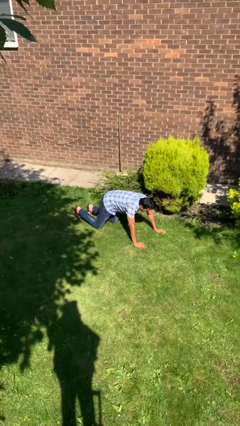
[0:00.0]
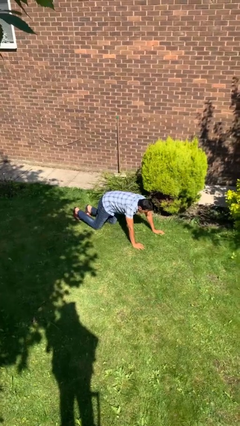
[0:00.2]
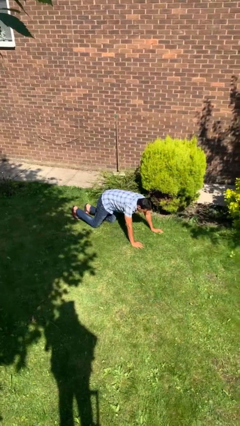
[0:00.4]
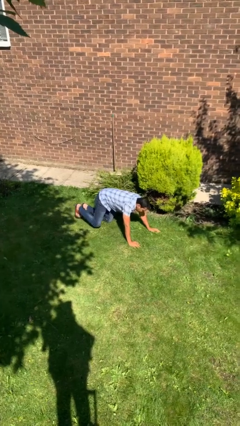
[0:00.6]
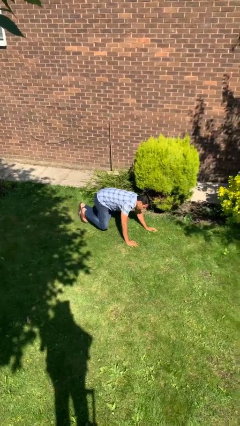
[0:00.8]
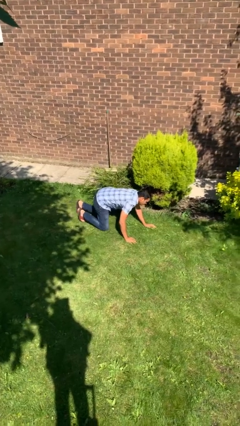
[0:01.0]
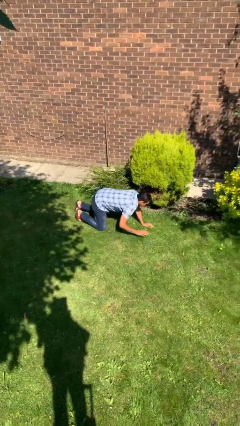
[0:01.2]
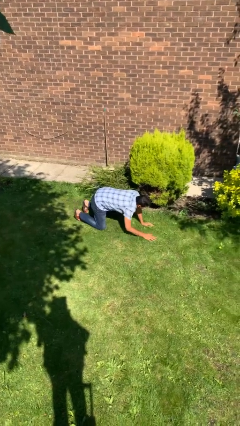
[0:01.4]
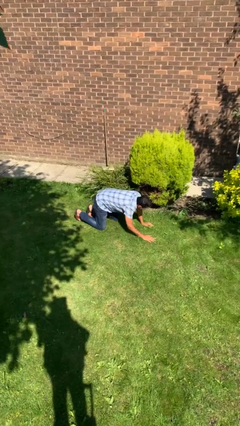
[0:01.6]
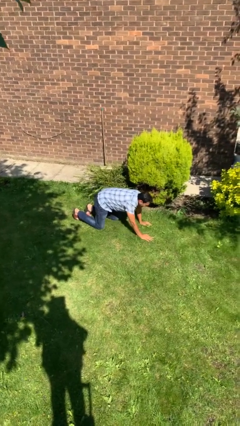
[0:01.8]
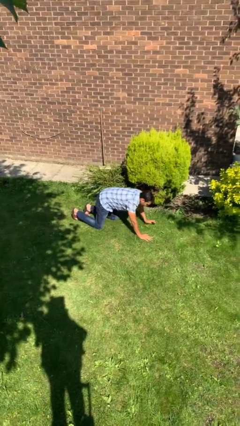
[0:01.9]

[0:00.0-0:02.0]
person crawls

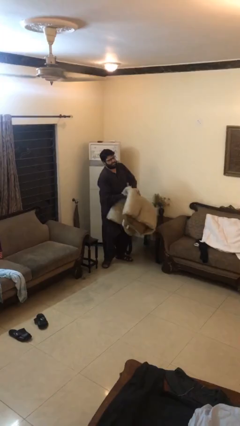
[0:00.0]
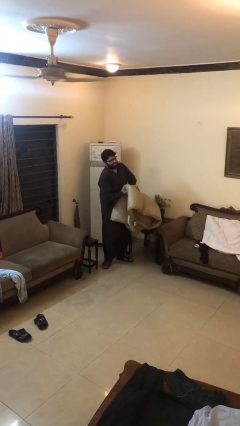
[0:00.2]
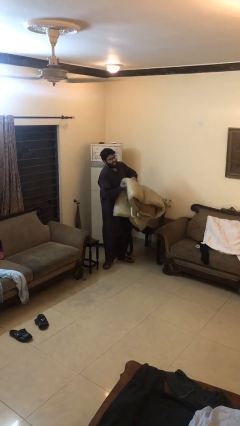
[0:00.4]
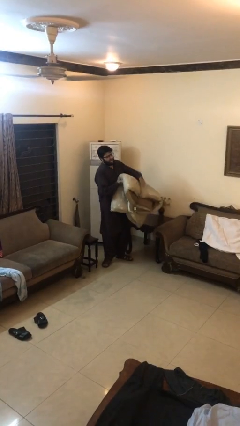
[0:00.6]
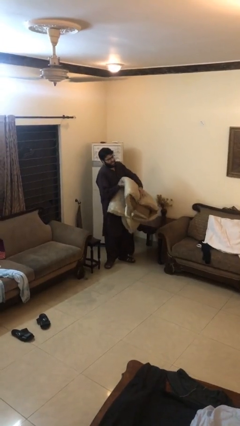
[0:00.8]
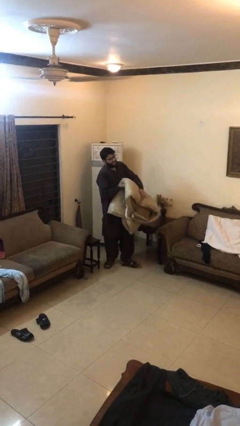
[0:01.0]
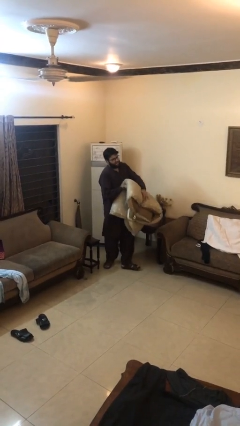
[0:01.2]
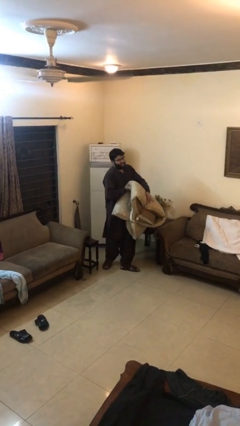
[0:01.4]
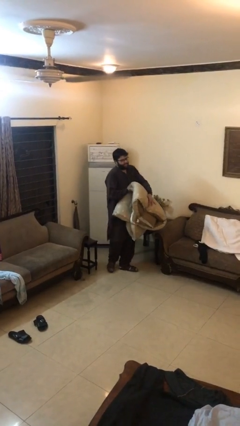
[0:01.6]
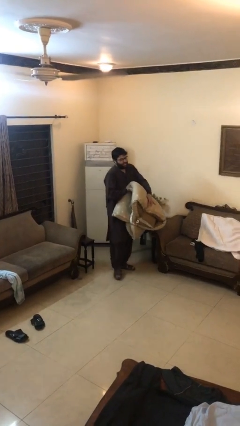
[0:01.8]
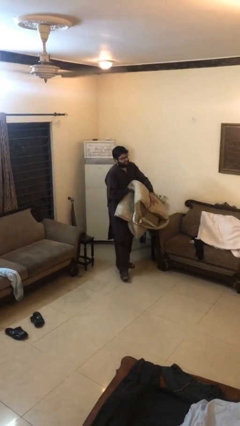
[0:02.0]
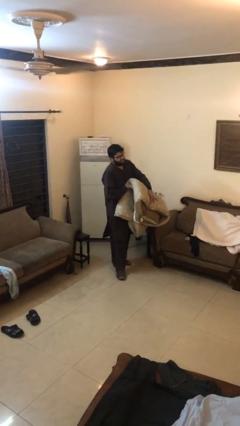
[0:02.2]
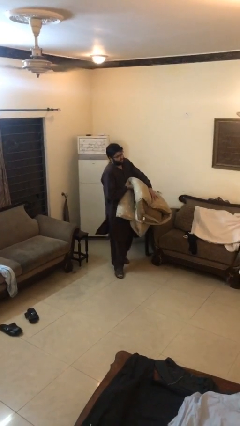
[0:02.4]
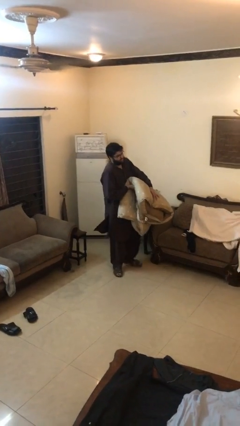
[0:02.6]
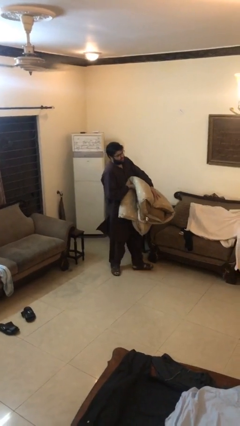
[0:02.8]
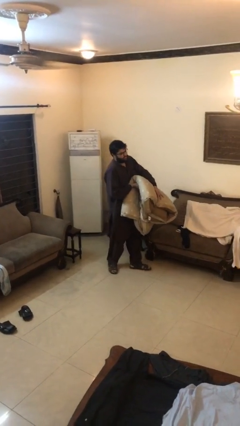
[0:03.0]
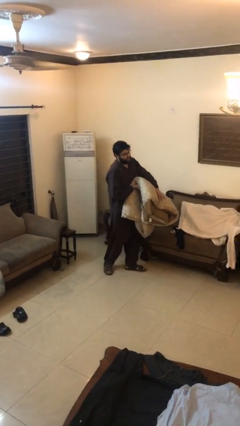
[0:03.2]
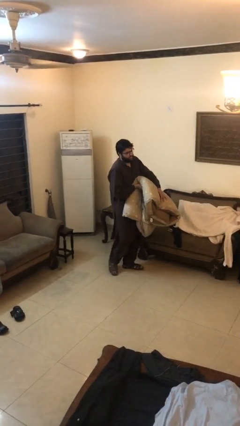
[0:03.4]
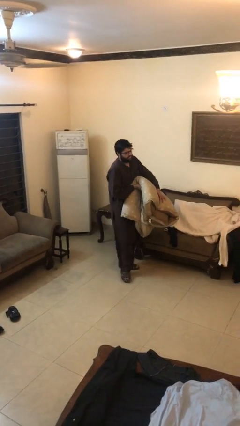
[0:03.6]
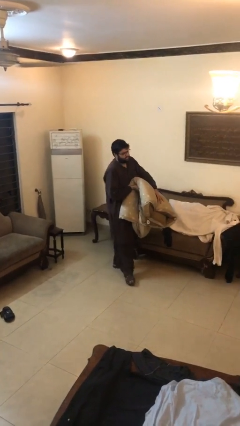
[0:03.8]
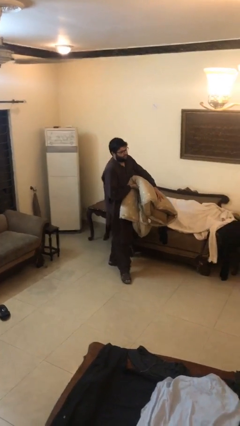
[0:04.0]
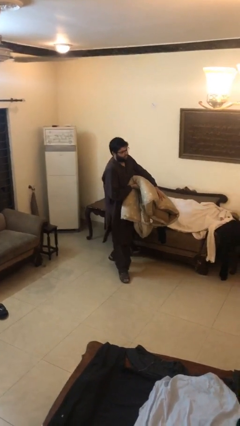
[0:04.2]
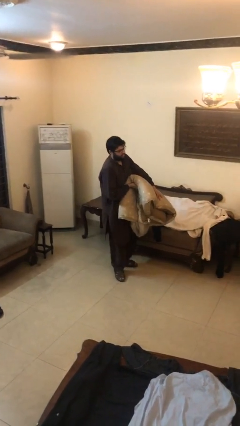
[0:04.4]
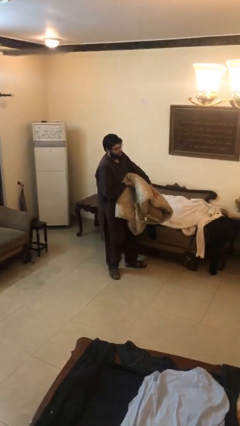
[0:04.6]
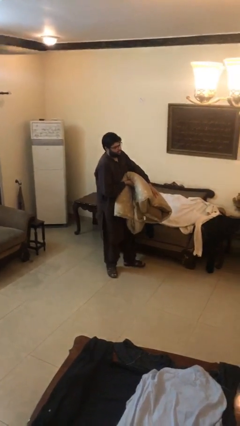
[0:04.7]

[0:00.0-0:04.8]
person carries heavy object

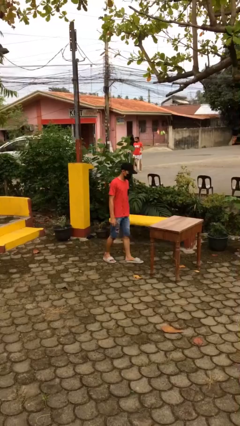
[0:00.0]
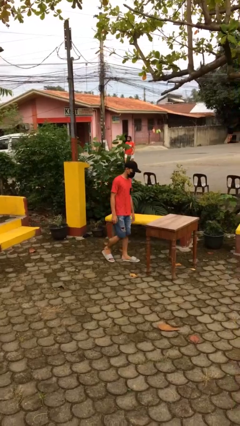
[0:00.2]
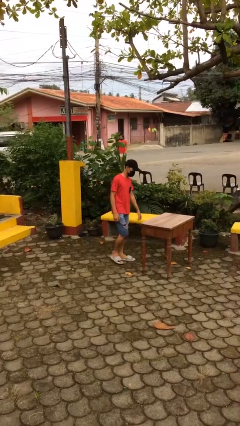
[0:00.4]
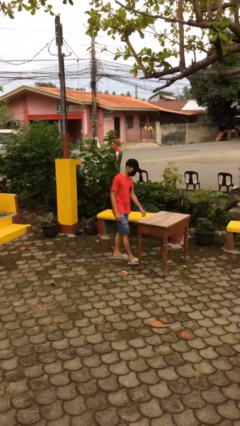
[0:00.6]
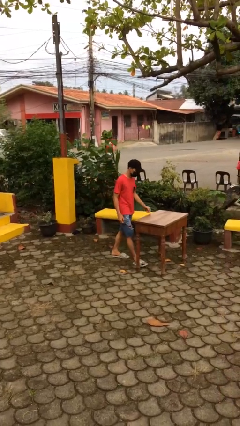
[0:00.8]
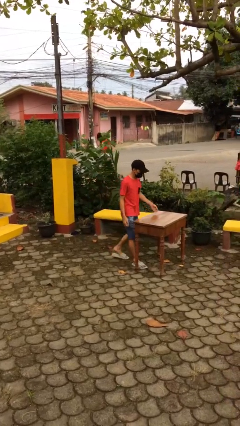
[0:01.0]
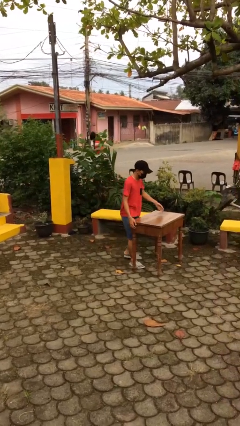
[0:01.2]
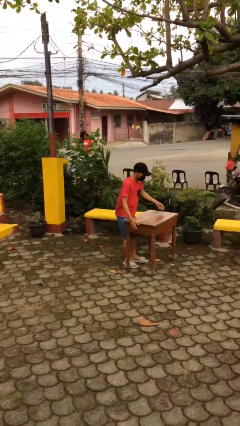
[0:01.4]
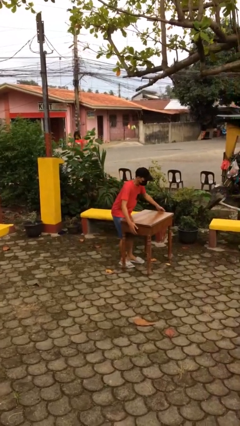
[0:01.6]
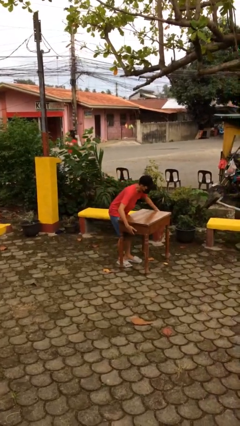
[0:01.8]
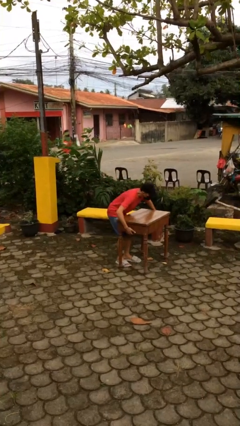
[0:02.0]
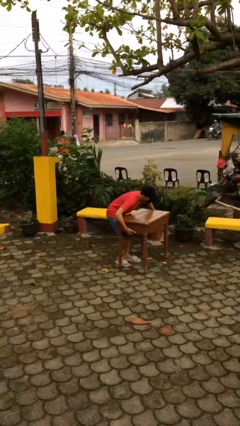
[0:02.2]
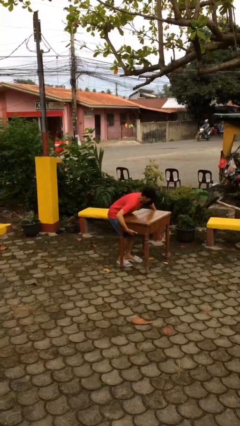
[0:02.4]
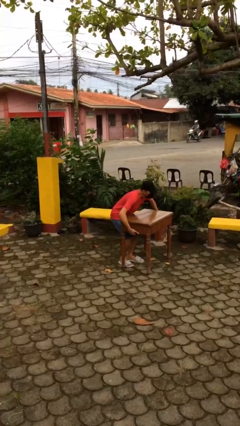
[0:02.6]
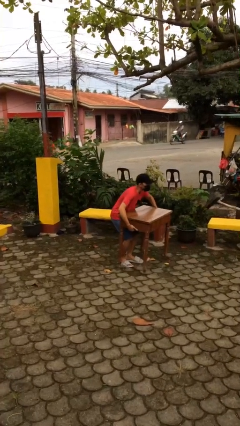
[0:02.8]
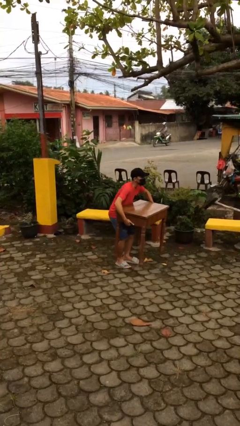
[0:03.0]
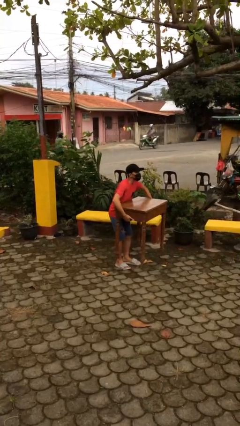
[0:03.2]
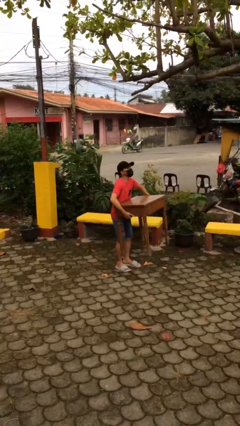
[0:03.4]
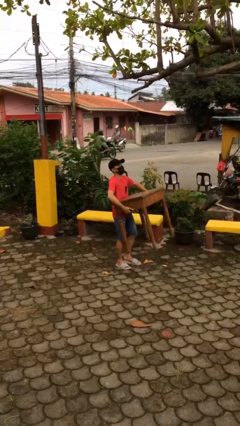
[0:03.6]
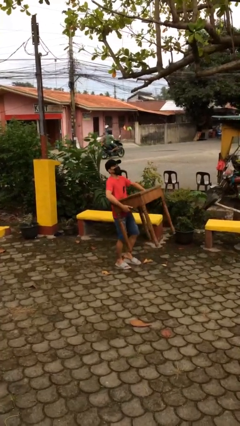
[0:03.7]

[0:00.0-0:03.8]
person picks up object from floor

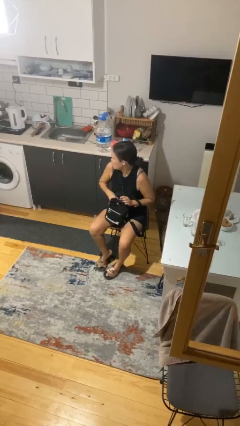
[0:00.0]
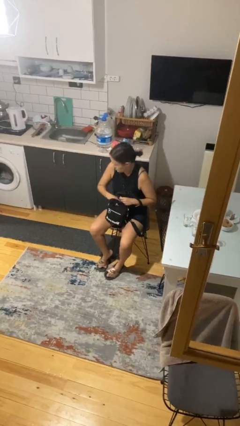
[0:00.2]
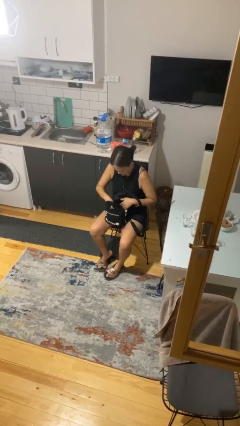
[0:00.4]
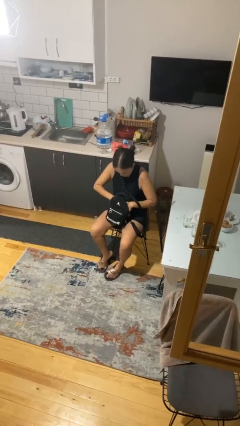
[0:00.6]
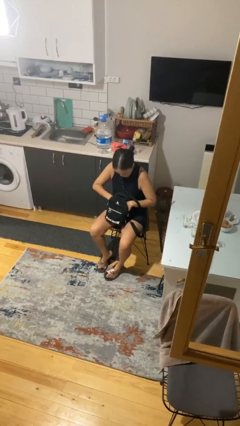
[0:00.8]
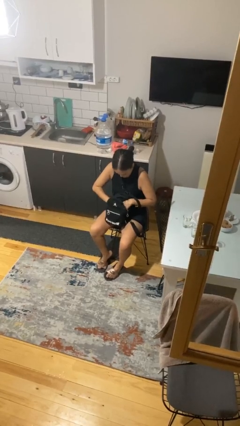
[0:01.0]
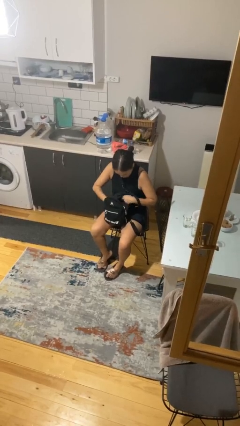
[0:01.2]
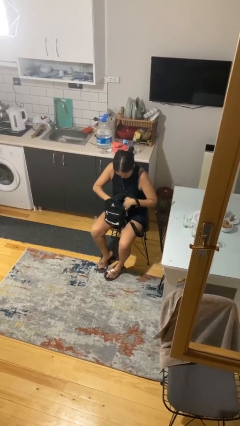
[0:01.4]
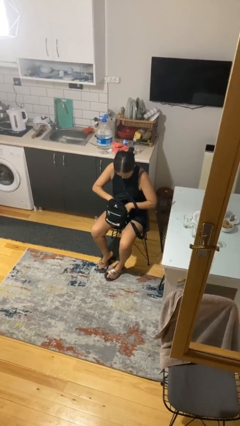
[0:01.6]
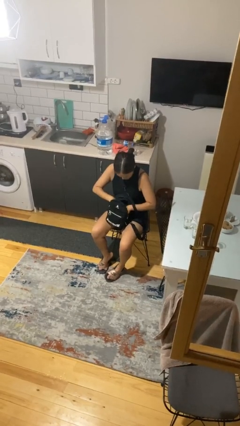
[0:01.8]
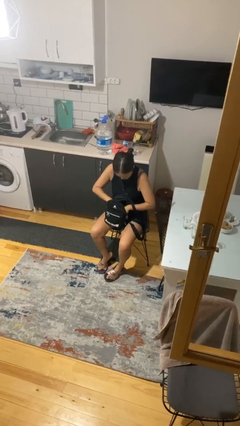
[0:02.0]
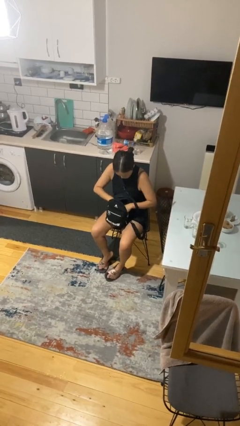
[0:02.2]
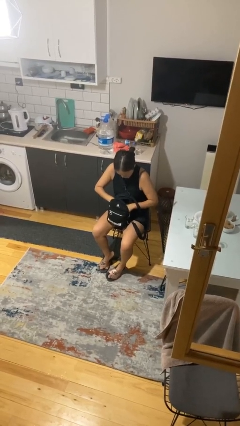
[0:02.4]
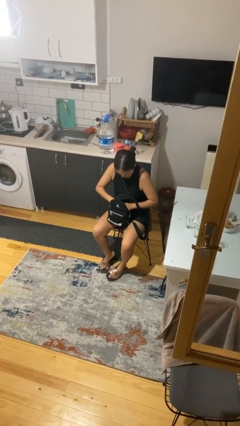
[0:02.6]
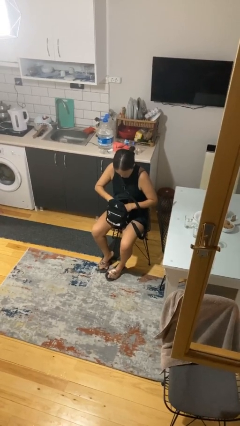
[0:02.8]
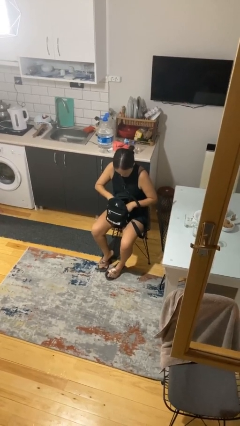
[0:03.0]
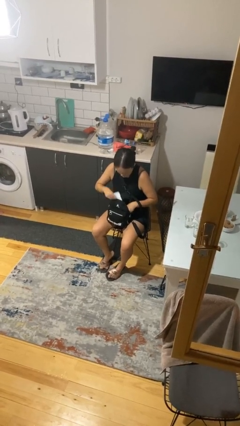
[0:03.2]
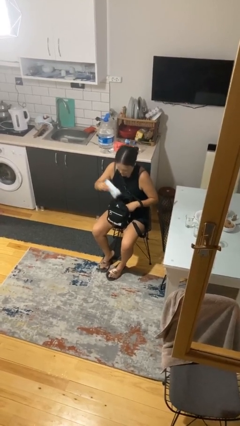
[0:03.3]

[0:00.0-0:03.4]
person searches in backpack

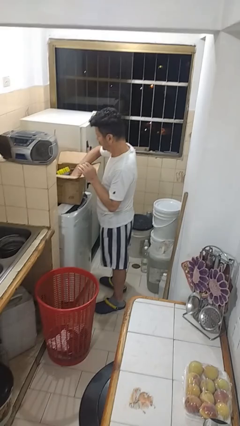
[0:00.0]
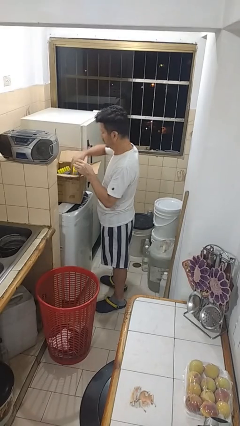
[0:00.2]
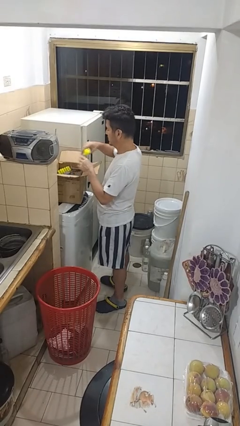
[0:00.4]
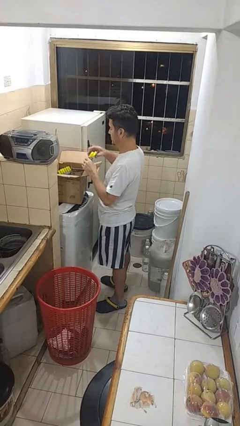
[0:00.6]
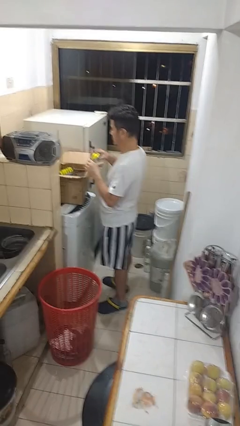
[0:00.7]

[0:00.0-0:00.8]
person takes object from box

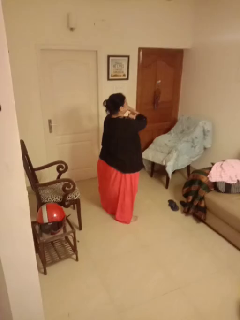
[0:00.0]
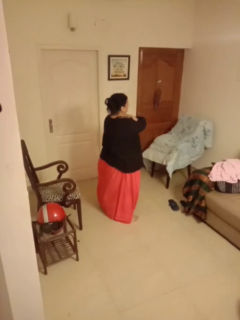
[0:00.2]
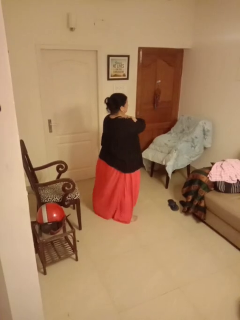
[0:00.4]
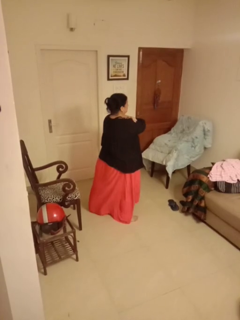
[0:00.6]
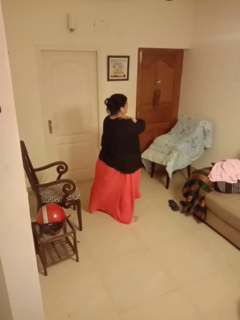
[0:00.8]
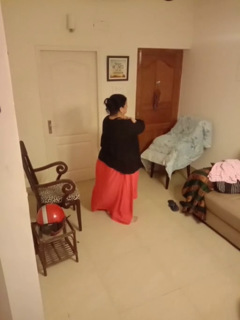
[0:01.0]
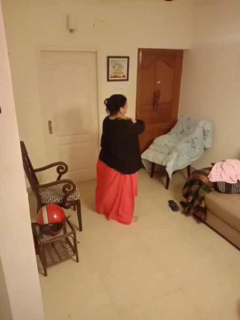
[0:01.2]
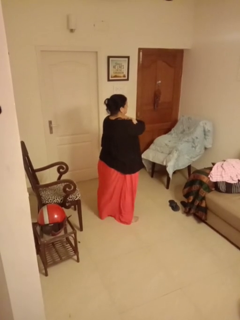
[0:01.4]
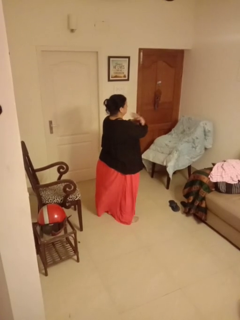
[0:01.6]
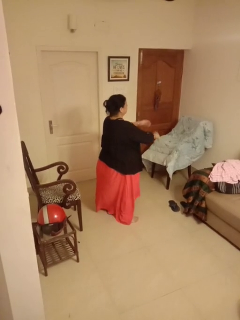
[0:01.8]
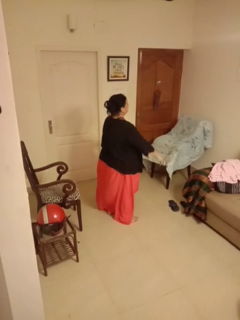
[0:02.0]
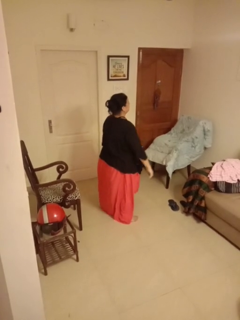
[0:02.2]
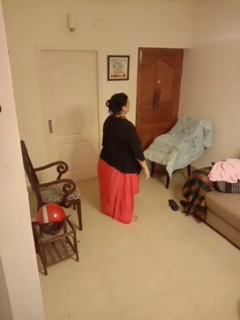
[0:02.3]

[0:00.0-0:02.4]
person gestures arms x

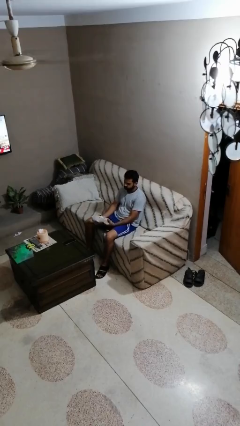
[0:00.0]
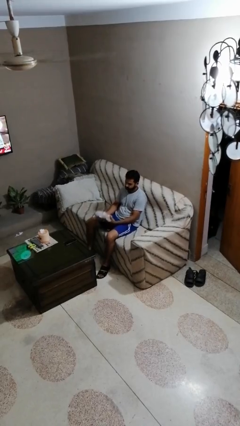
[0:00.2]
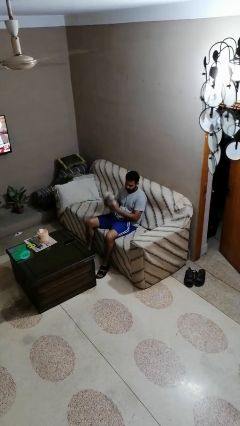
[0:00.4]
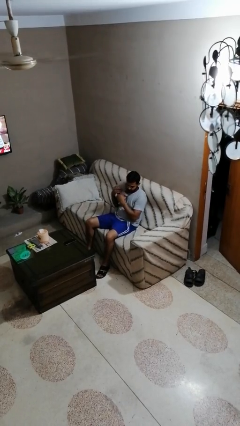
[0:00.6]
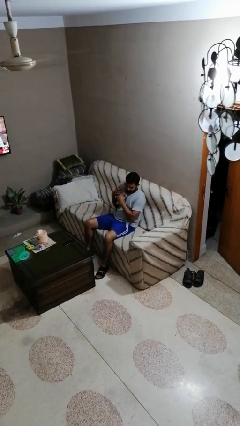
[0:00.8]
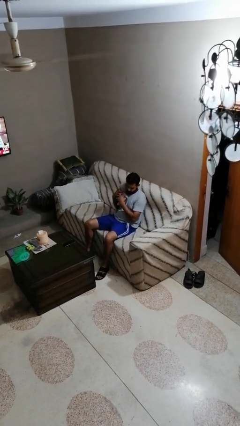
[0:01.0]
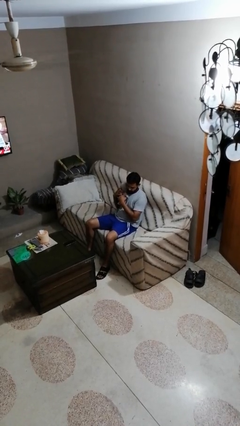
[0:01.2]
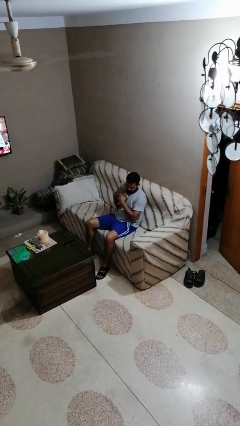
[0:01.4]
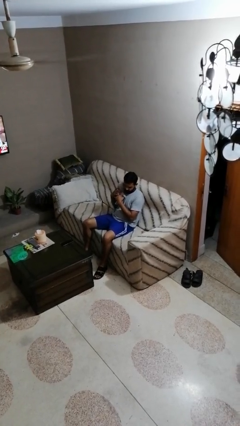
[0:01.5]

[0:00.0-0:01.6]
person hugs stuffed animal
